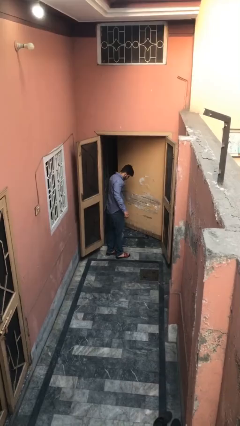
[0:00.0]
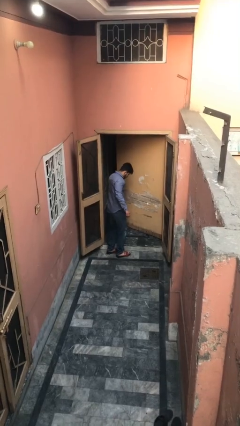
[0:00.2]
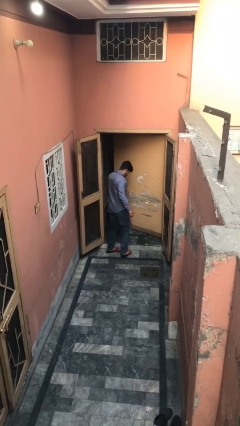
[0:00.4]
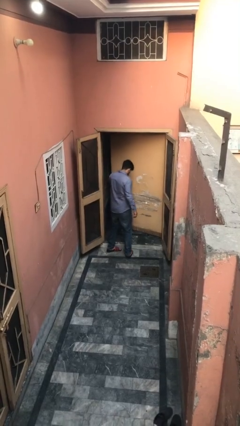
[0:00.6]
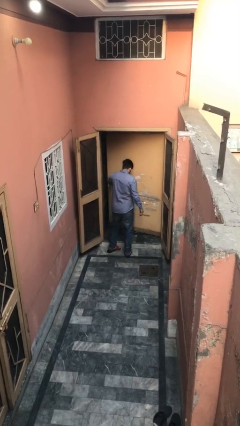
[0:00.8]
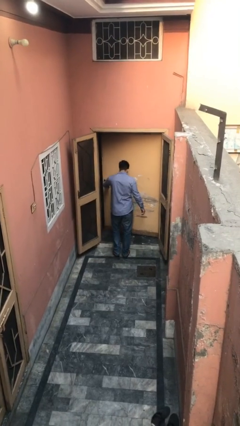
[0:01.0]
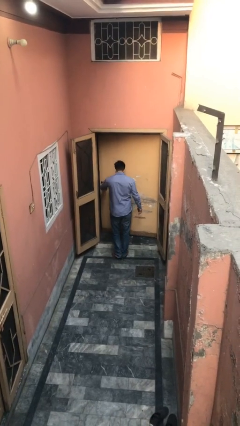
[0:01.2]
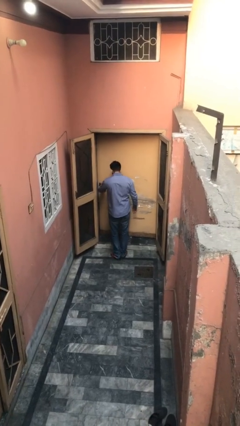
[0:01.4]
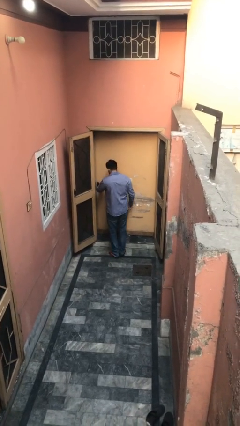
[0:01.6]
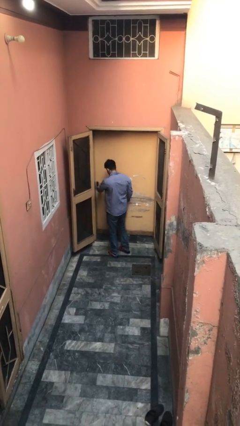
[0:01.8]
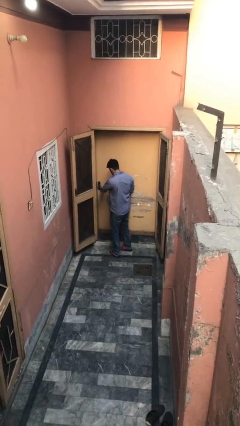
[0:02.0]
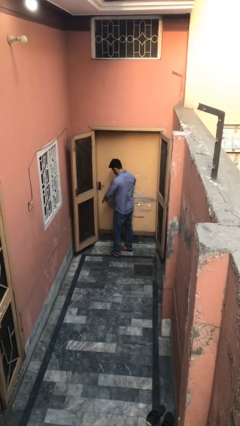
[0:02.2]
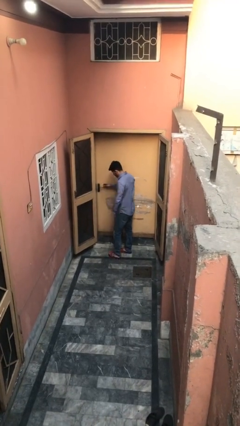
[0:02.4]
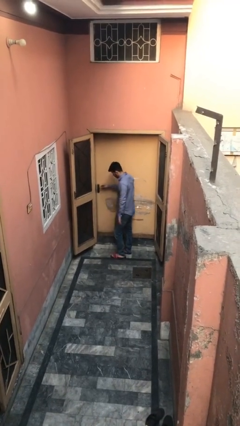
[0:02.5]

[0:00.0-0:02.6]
person closes facility door

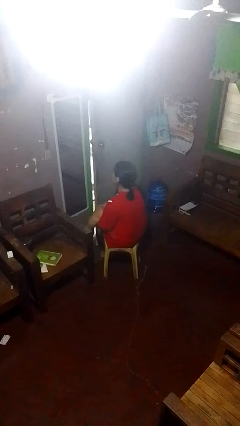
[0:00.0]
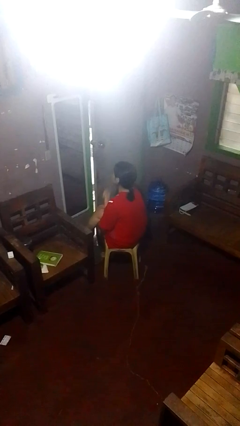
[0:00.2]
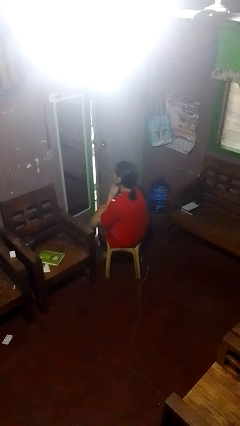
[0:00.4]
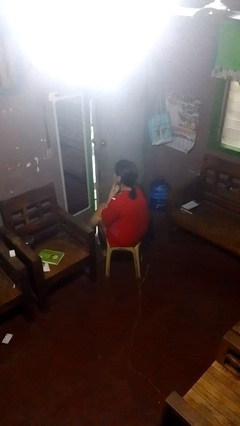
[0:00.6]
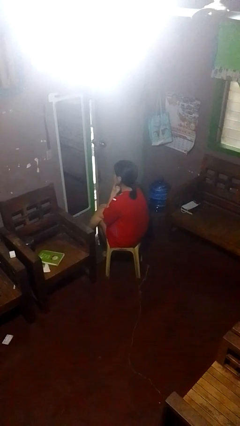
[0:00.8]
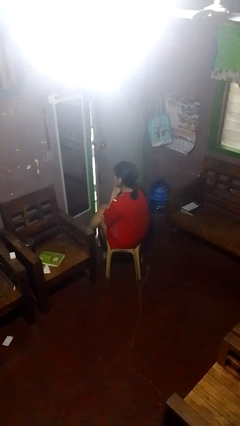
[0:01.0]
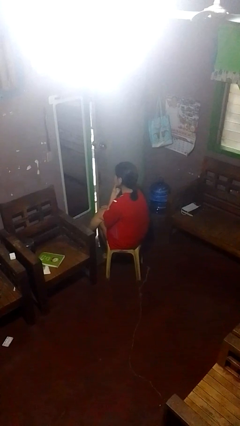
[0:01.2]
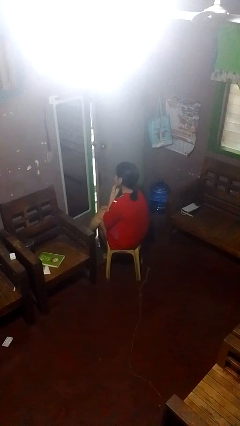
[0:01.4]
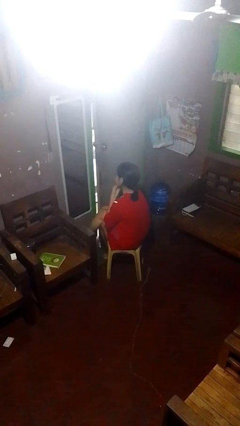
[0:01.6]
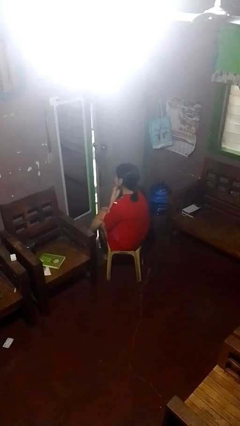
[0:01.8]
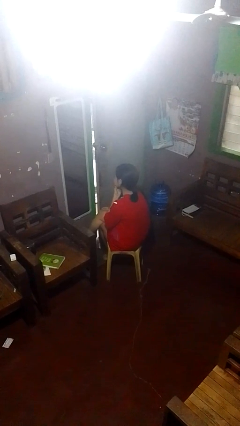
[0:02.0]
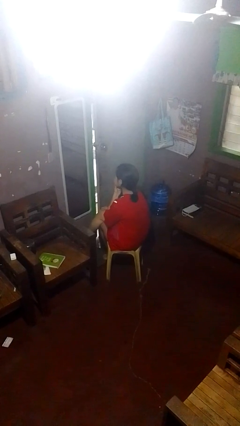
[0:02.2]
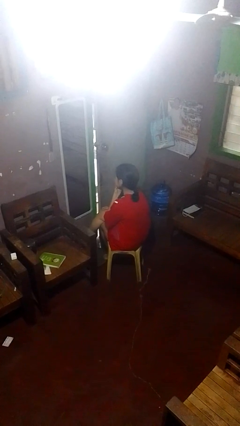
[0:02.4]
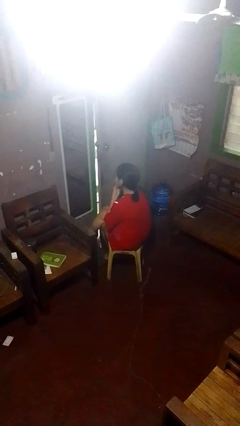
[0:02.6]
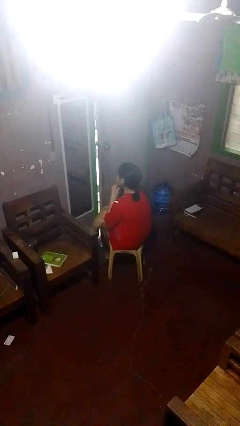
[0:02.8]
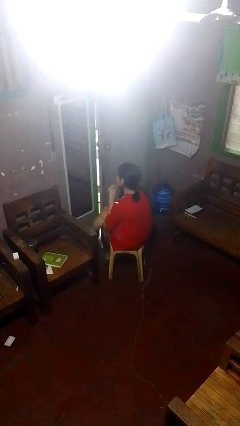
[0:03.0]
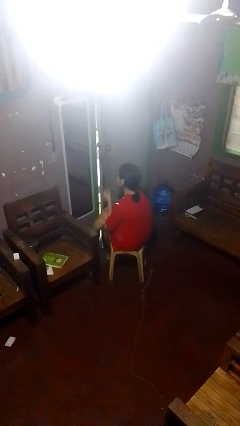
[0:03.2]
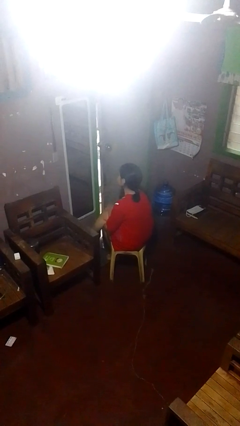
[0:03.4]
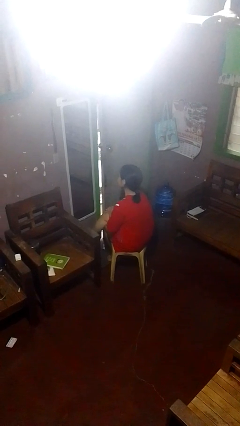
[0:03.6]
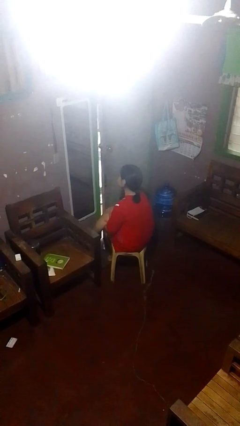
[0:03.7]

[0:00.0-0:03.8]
person strokes chin

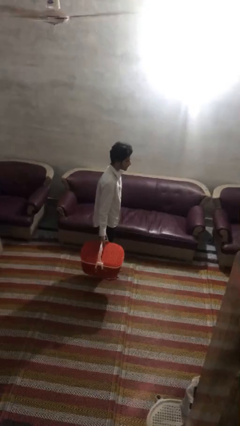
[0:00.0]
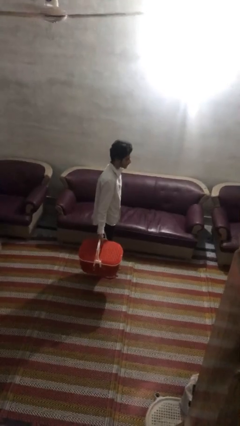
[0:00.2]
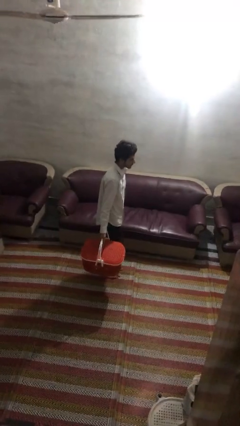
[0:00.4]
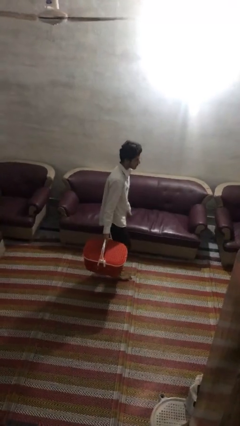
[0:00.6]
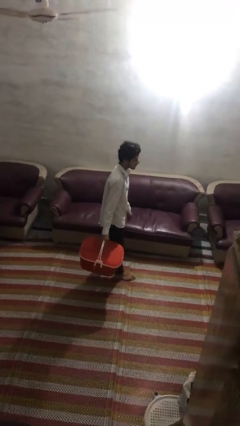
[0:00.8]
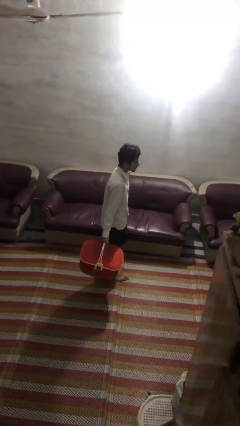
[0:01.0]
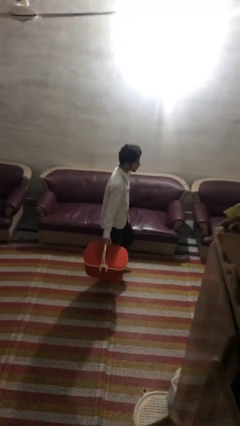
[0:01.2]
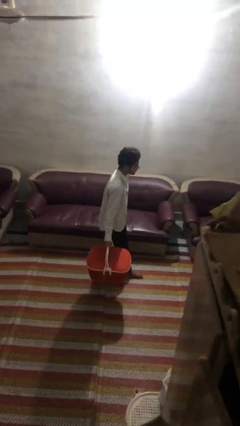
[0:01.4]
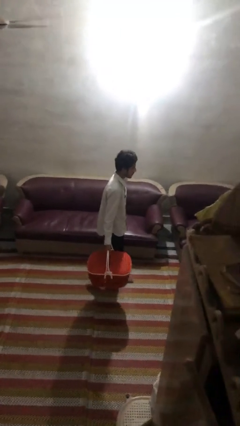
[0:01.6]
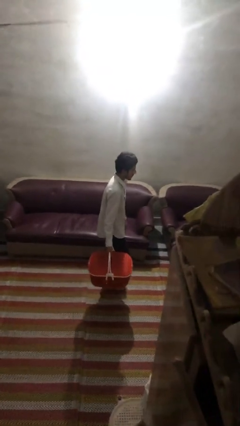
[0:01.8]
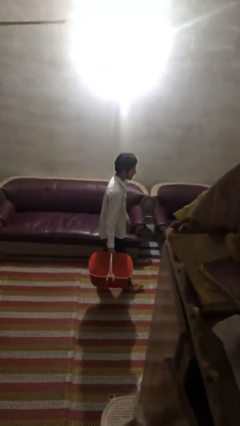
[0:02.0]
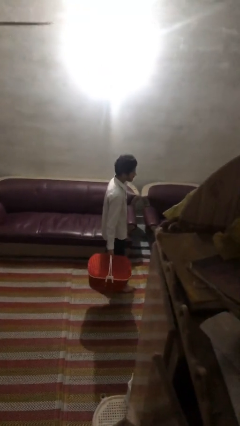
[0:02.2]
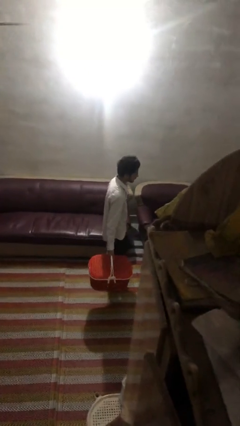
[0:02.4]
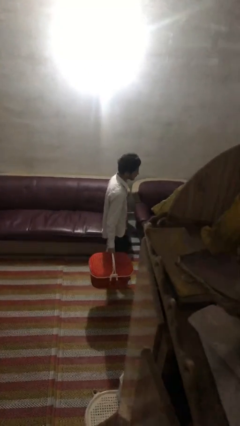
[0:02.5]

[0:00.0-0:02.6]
person carries laundry basket

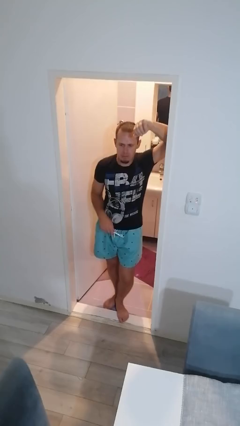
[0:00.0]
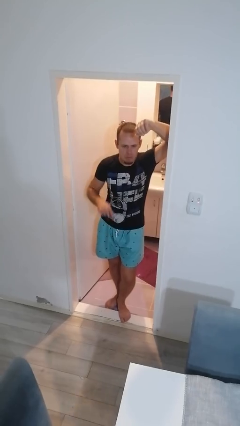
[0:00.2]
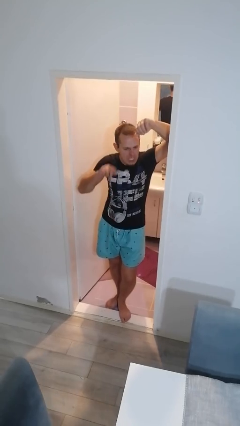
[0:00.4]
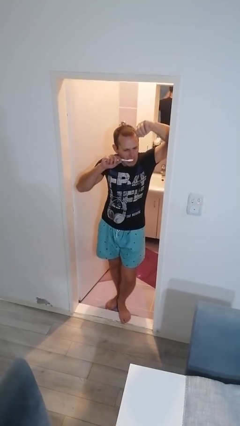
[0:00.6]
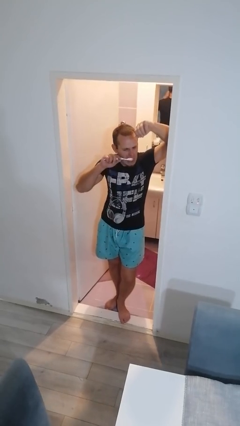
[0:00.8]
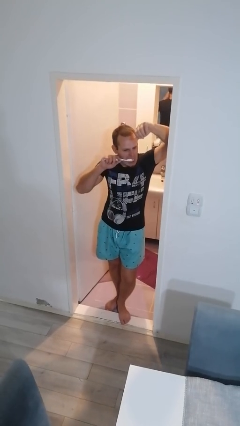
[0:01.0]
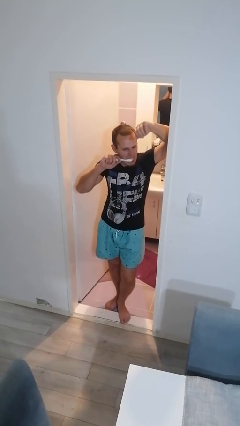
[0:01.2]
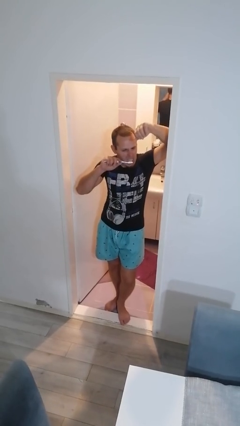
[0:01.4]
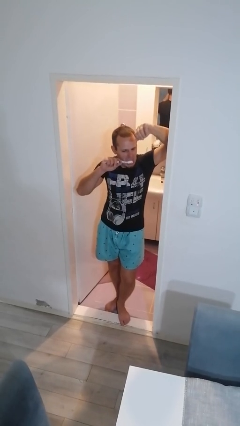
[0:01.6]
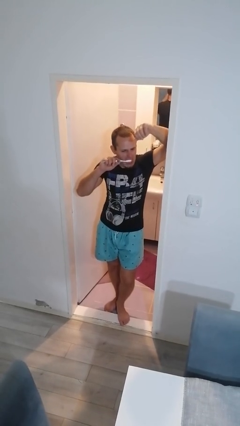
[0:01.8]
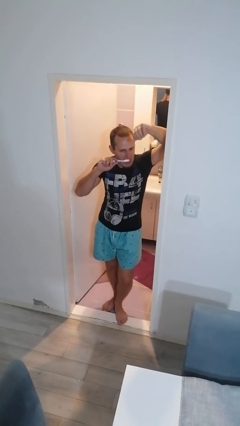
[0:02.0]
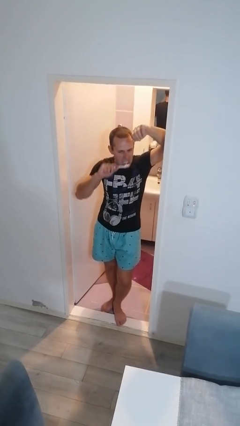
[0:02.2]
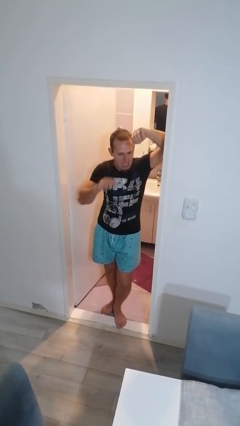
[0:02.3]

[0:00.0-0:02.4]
person brushes teeth

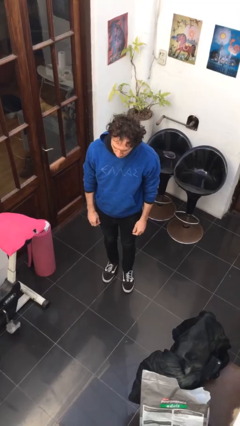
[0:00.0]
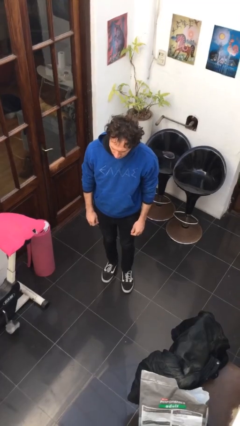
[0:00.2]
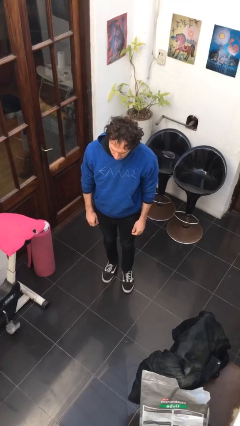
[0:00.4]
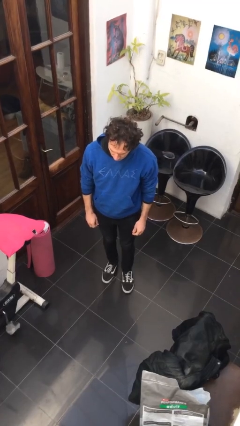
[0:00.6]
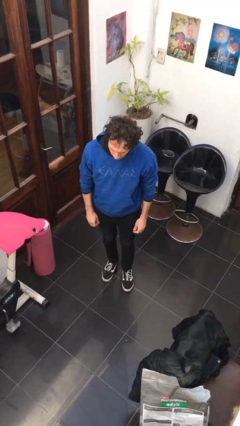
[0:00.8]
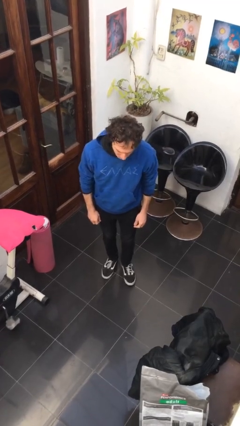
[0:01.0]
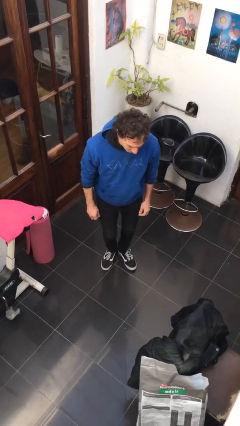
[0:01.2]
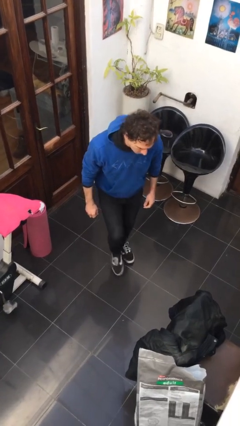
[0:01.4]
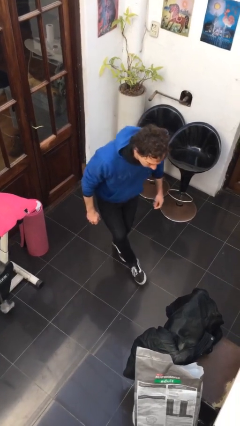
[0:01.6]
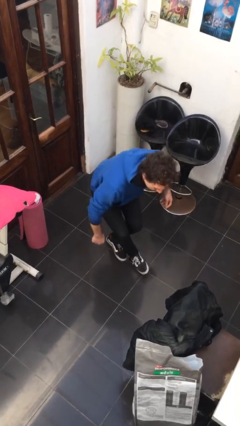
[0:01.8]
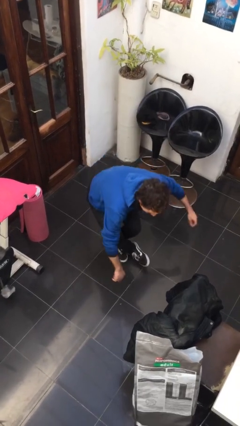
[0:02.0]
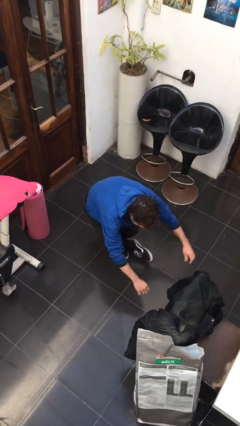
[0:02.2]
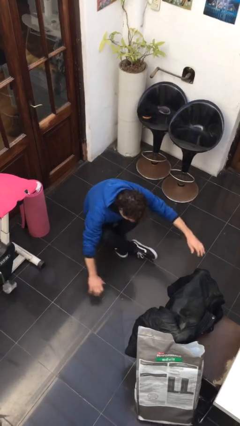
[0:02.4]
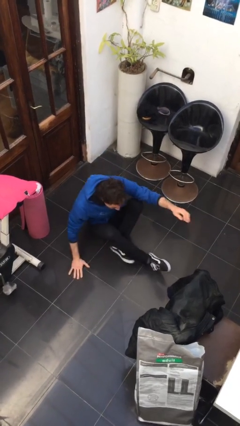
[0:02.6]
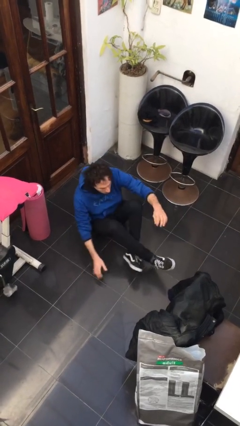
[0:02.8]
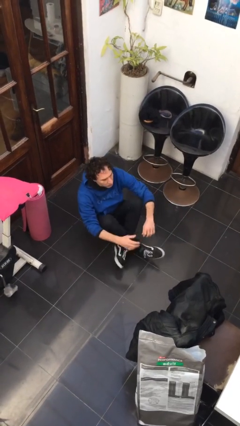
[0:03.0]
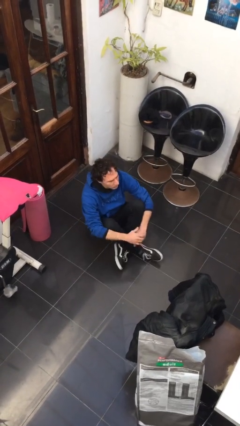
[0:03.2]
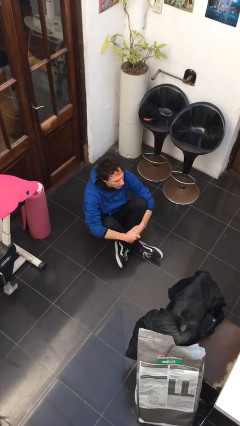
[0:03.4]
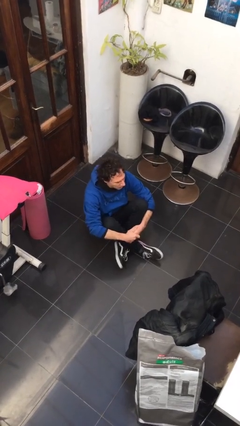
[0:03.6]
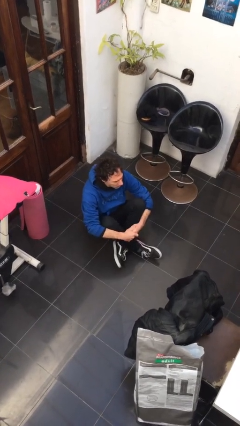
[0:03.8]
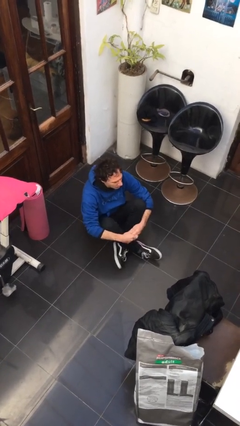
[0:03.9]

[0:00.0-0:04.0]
person sits crisscross

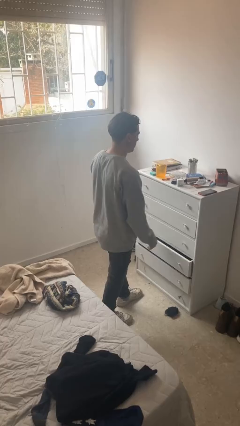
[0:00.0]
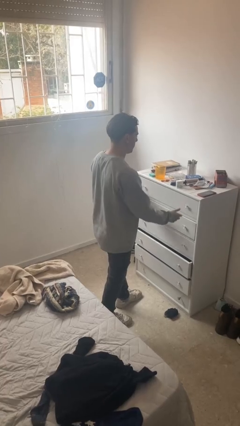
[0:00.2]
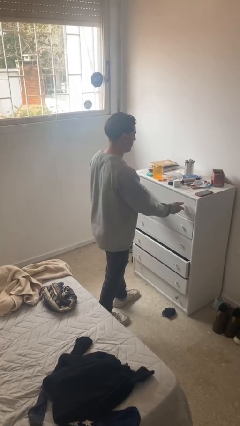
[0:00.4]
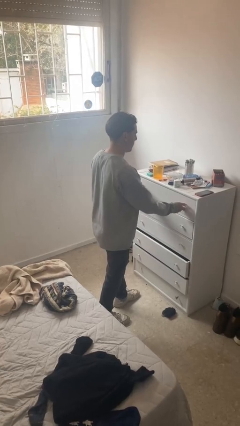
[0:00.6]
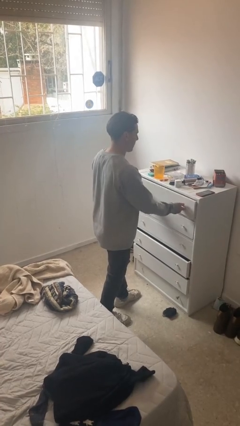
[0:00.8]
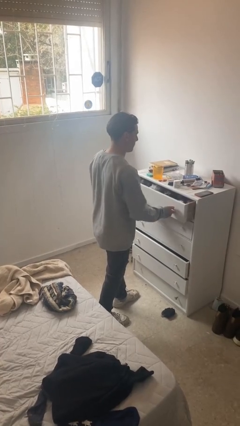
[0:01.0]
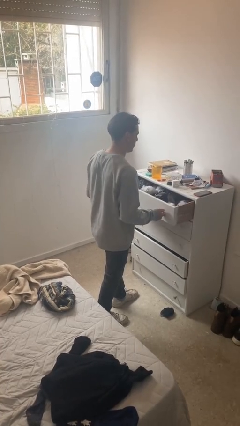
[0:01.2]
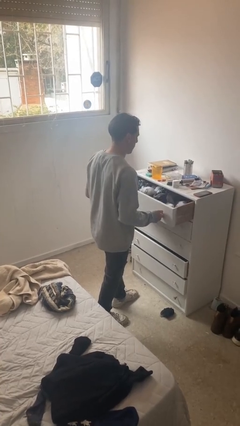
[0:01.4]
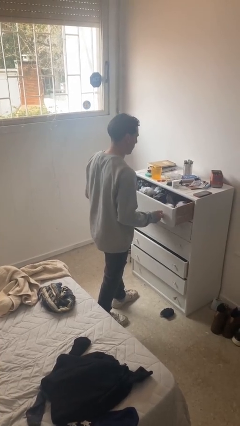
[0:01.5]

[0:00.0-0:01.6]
person opens dresser drawer
